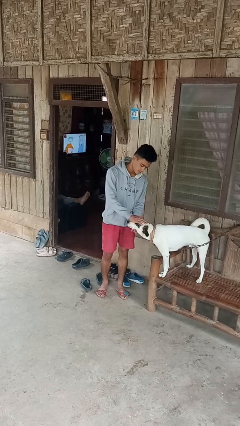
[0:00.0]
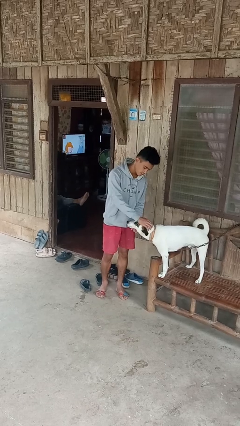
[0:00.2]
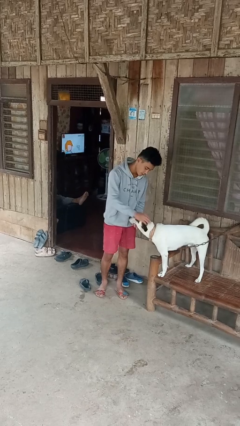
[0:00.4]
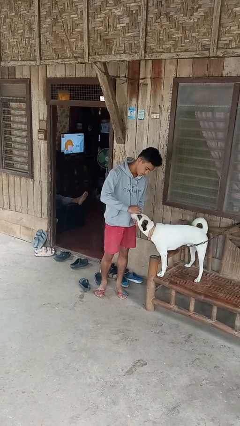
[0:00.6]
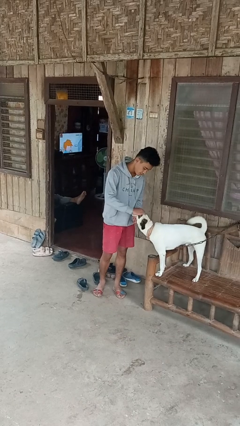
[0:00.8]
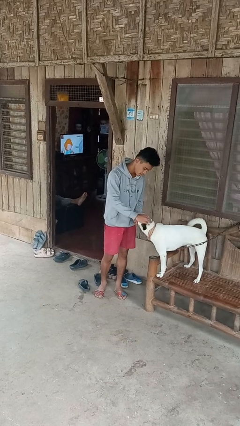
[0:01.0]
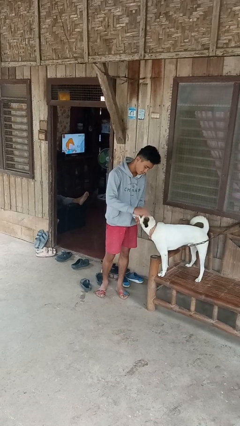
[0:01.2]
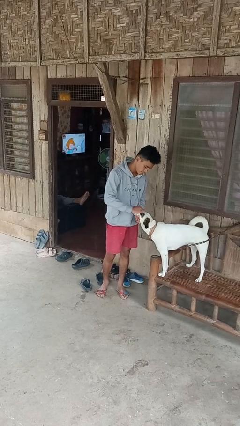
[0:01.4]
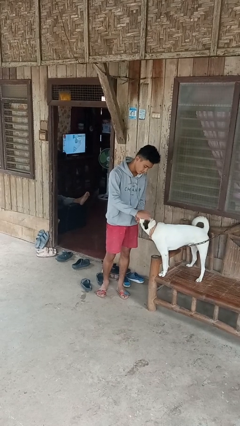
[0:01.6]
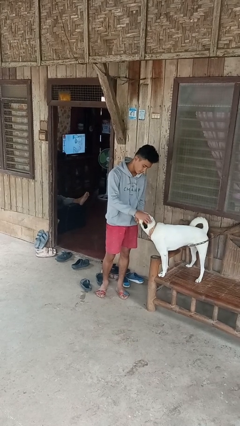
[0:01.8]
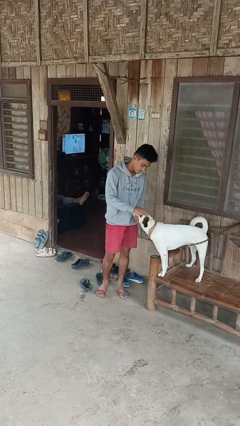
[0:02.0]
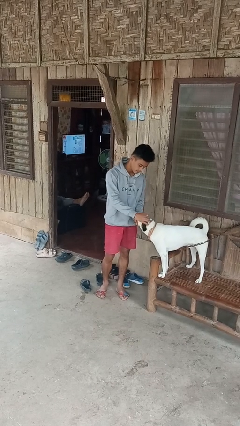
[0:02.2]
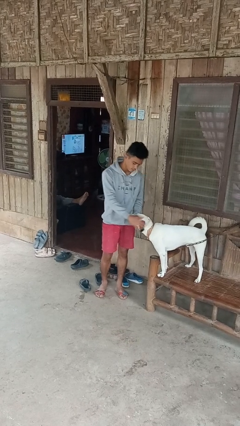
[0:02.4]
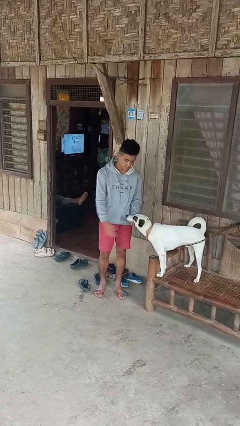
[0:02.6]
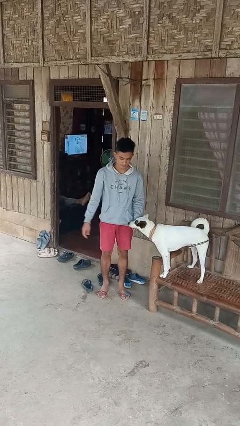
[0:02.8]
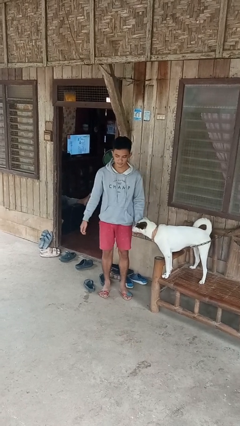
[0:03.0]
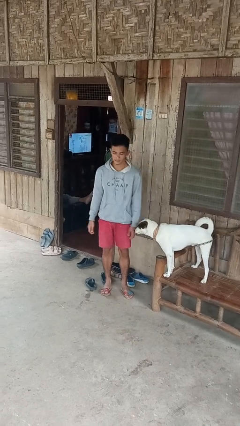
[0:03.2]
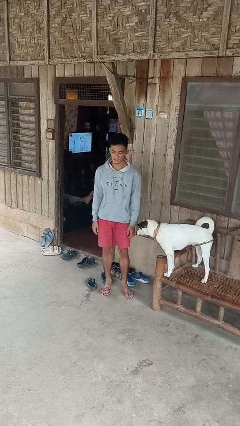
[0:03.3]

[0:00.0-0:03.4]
person pets dog

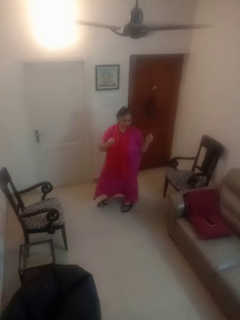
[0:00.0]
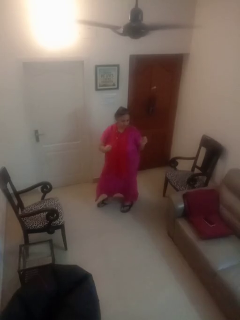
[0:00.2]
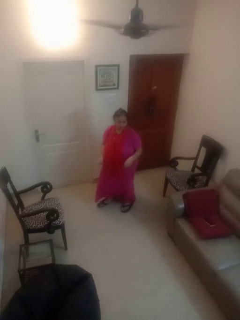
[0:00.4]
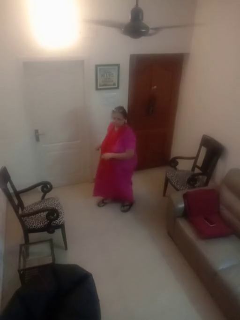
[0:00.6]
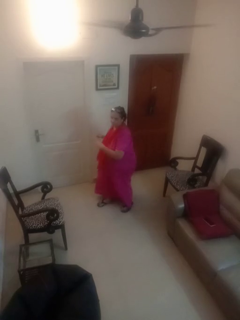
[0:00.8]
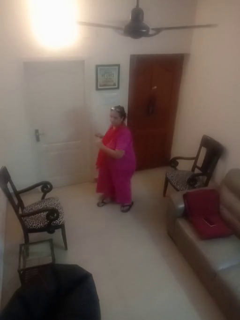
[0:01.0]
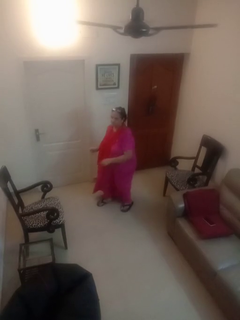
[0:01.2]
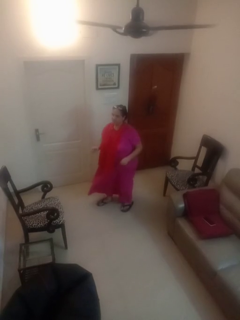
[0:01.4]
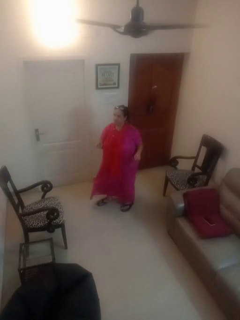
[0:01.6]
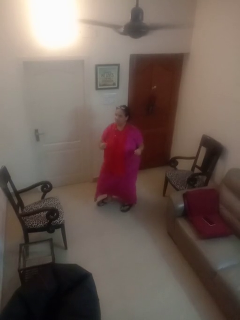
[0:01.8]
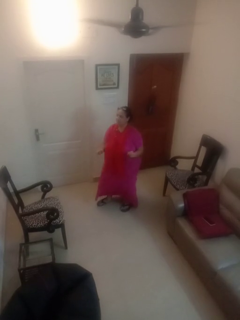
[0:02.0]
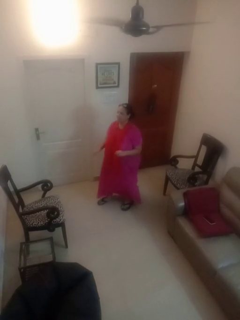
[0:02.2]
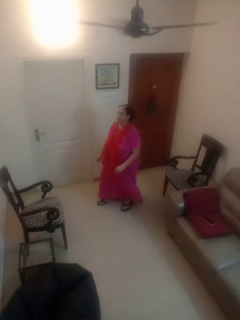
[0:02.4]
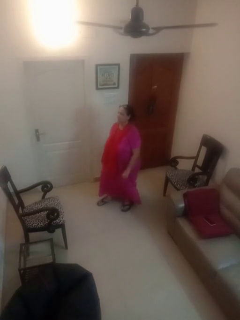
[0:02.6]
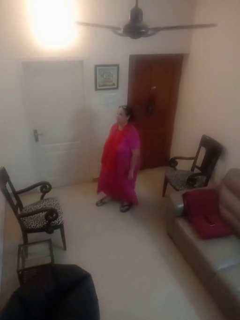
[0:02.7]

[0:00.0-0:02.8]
person dances in place

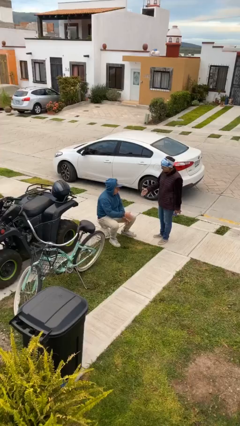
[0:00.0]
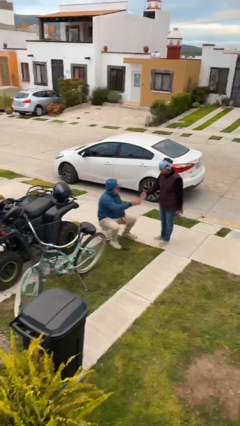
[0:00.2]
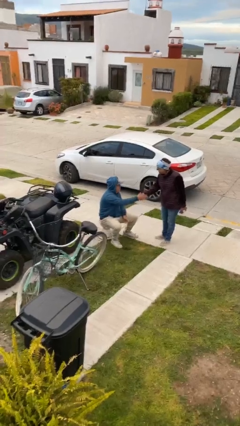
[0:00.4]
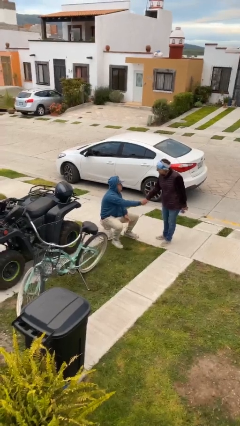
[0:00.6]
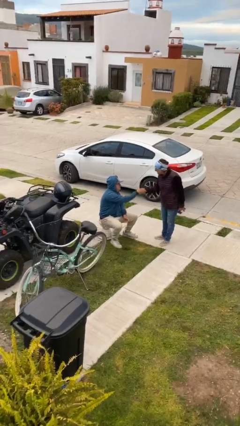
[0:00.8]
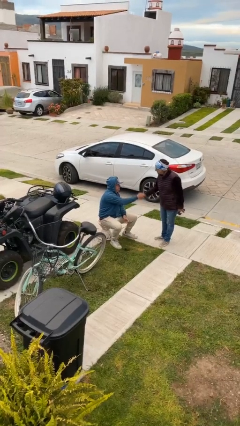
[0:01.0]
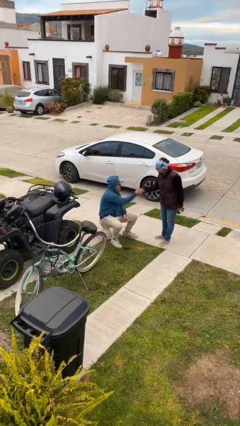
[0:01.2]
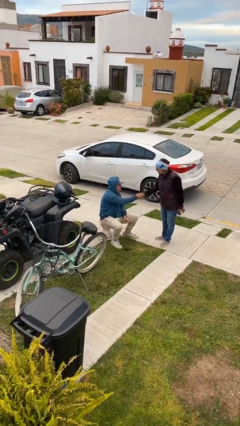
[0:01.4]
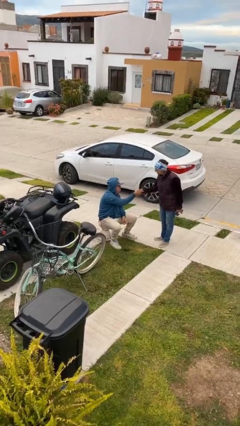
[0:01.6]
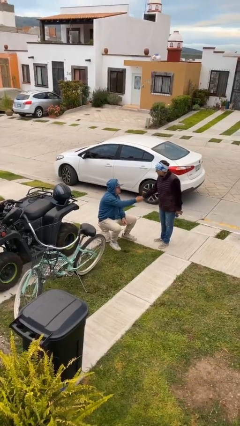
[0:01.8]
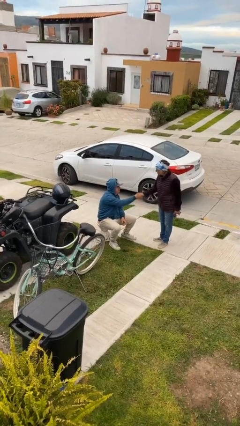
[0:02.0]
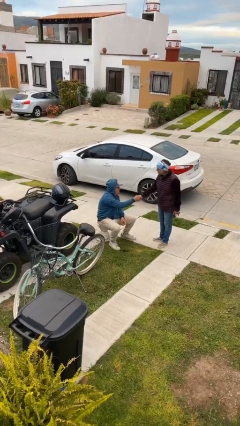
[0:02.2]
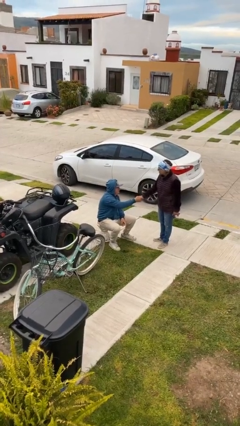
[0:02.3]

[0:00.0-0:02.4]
person shakes hand

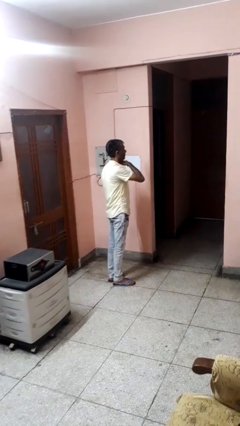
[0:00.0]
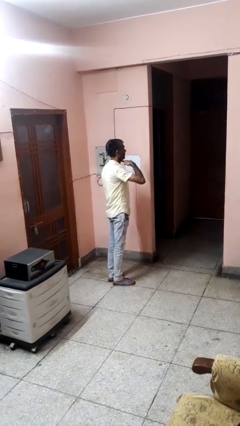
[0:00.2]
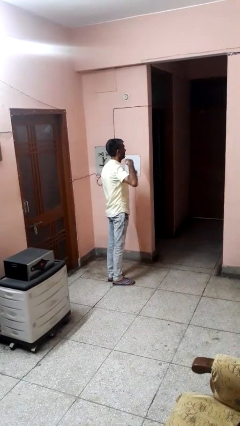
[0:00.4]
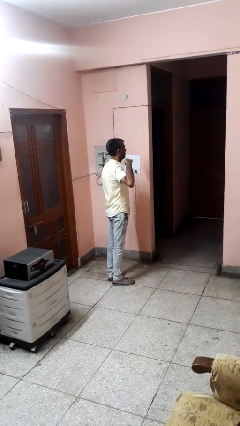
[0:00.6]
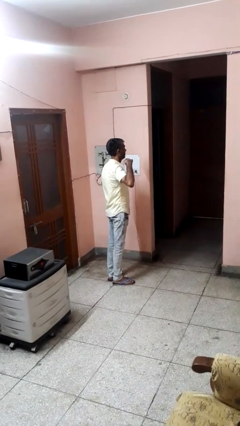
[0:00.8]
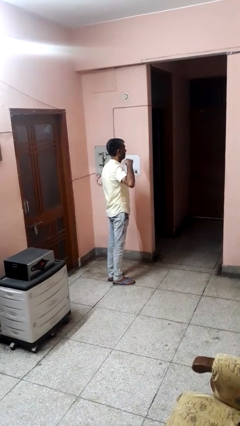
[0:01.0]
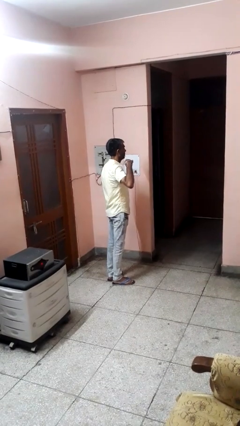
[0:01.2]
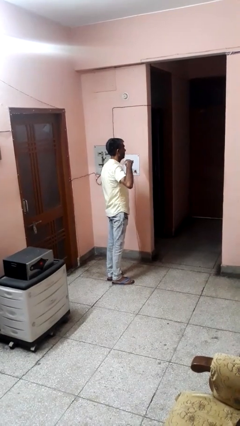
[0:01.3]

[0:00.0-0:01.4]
person gestures cut

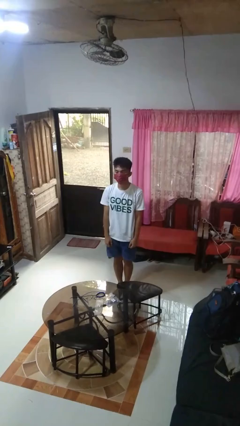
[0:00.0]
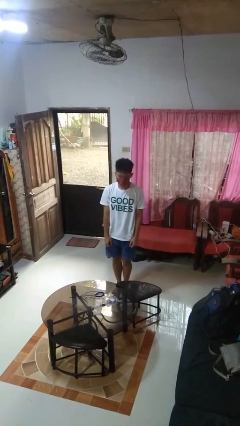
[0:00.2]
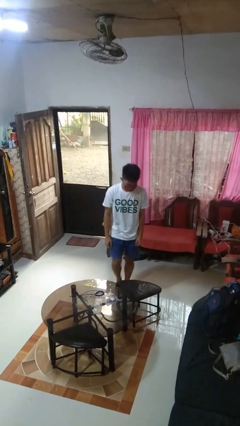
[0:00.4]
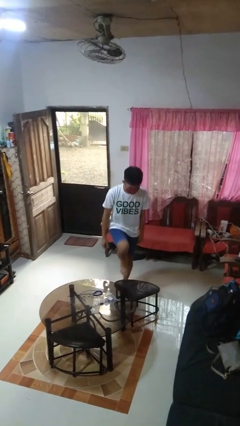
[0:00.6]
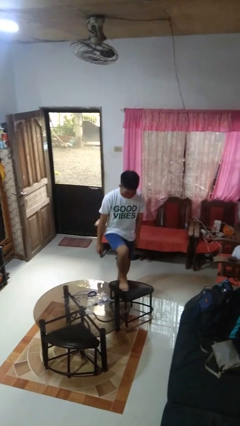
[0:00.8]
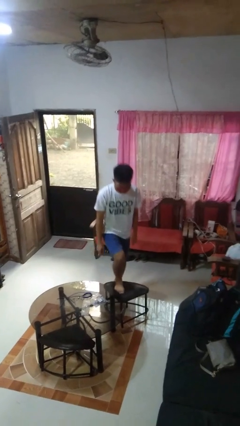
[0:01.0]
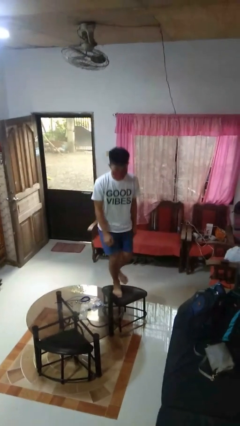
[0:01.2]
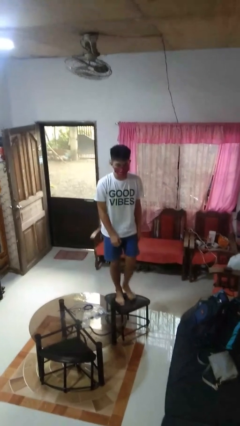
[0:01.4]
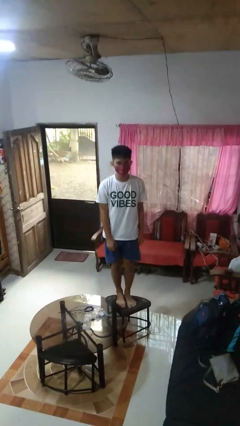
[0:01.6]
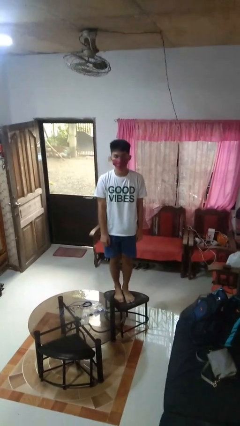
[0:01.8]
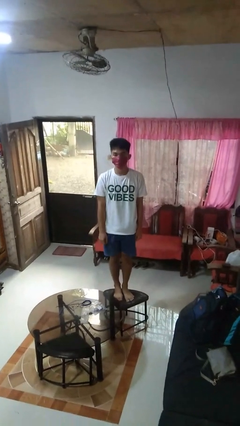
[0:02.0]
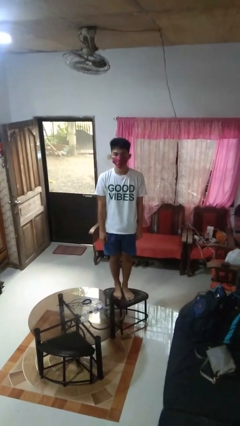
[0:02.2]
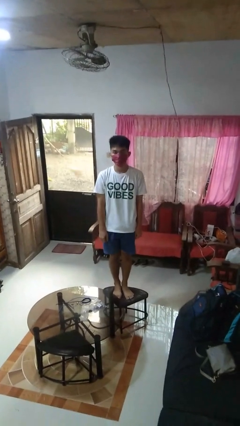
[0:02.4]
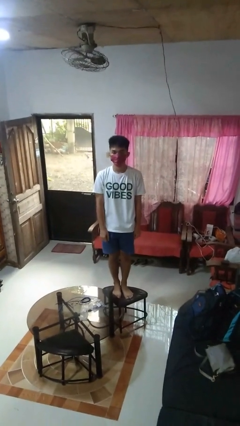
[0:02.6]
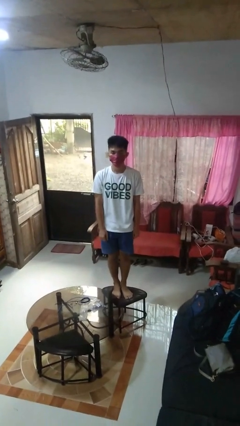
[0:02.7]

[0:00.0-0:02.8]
person climbs on chair

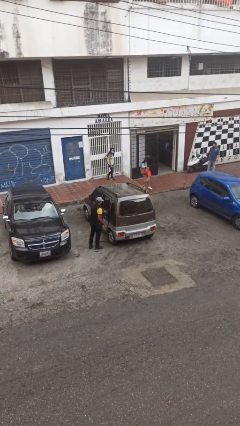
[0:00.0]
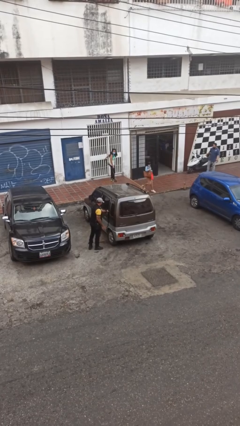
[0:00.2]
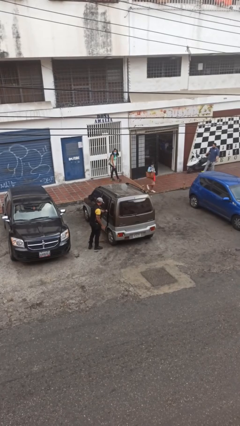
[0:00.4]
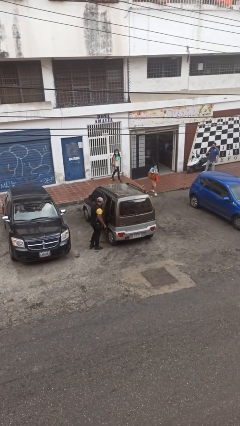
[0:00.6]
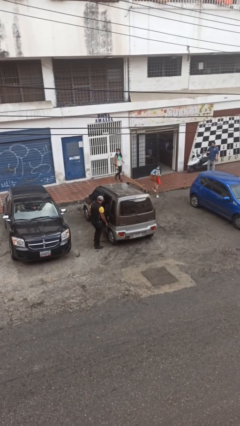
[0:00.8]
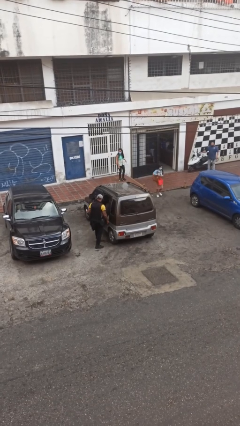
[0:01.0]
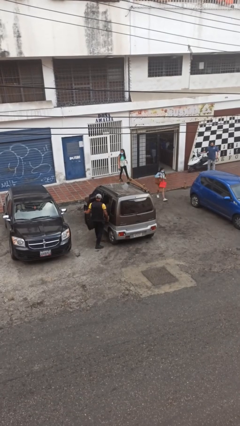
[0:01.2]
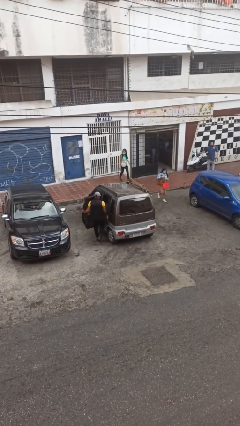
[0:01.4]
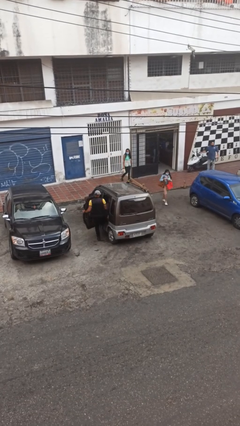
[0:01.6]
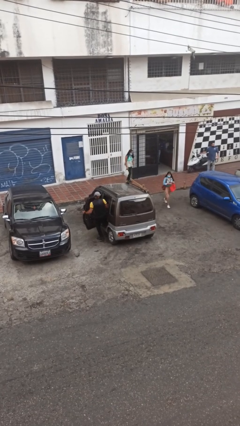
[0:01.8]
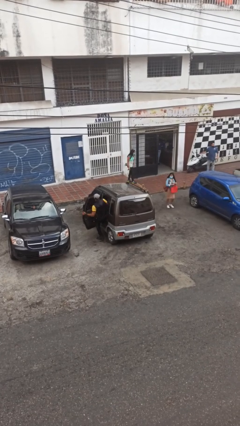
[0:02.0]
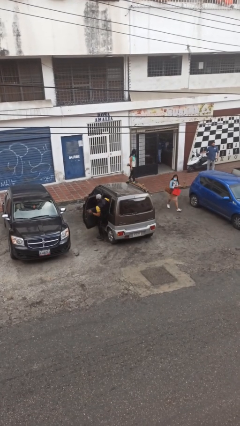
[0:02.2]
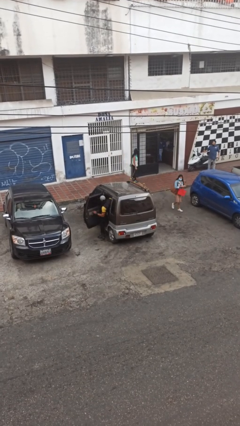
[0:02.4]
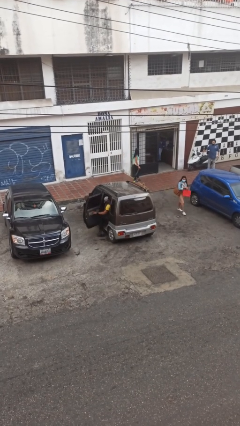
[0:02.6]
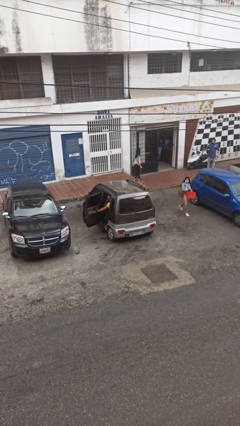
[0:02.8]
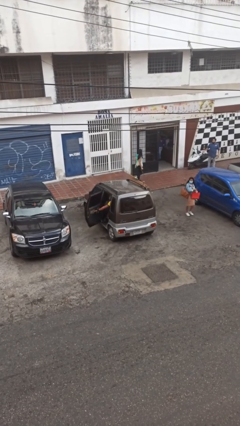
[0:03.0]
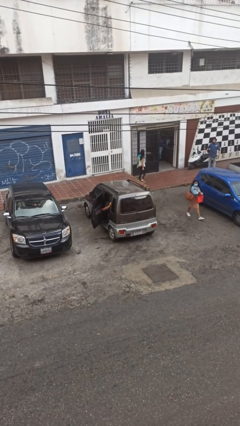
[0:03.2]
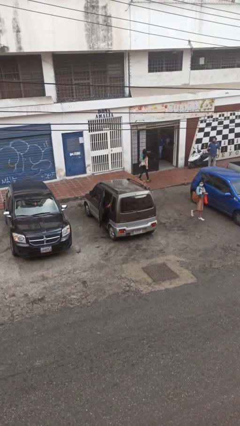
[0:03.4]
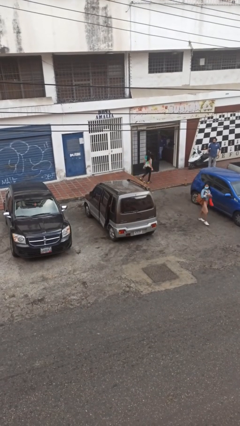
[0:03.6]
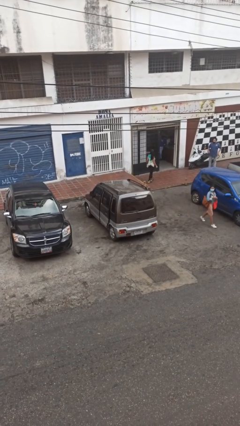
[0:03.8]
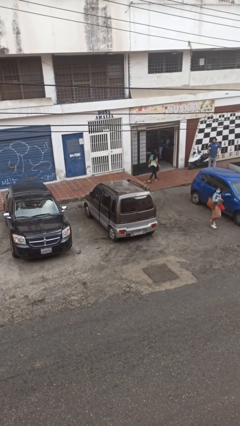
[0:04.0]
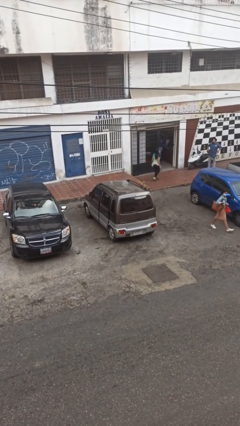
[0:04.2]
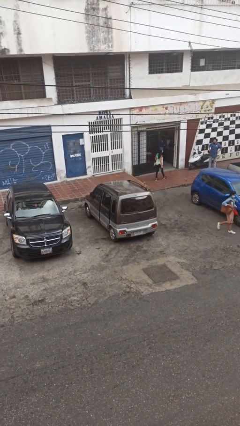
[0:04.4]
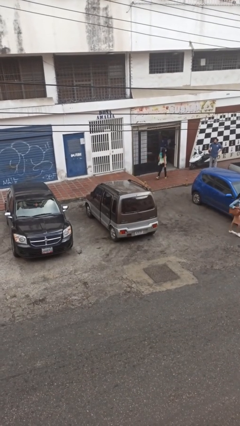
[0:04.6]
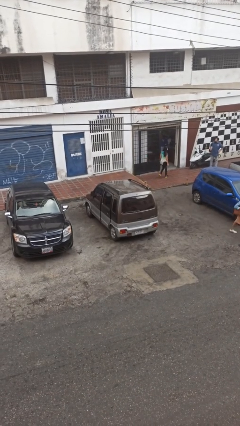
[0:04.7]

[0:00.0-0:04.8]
car picks up person

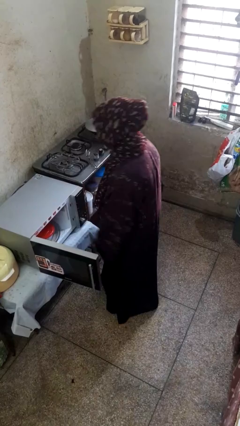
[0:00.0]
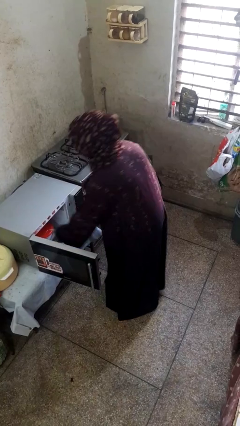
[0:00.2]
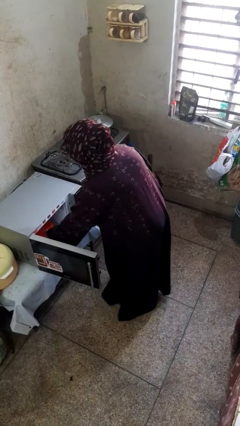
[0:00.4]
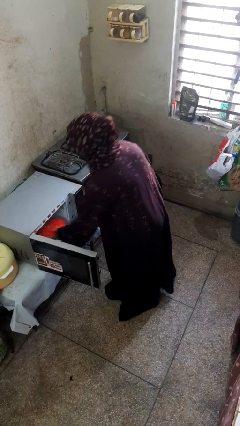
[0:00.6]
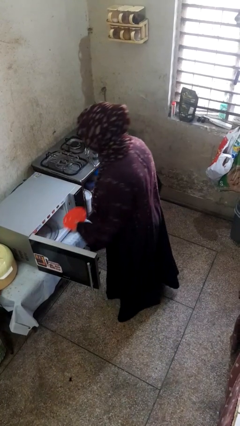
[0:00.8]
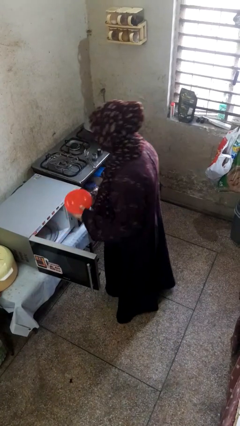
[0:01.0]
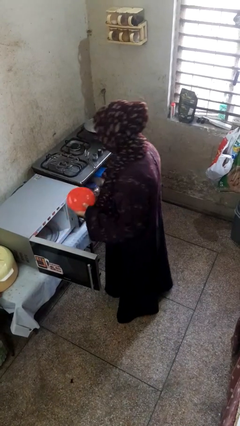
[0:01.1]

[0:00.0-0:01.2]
person takes object from microwave
